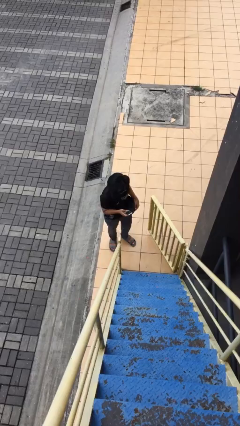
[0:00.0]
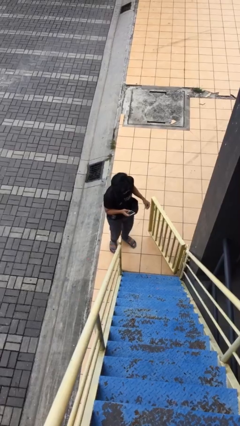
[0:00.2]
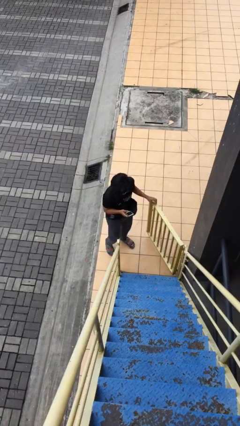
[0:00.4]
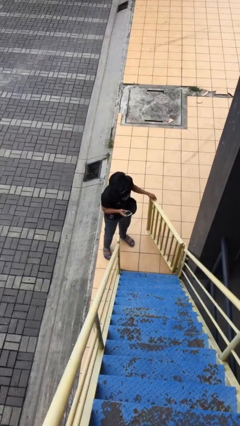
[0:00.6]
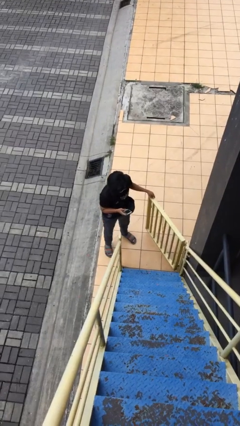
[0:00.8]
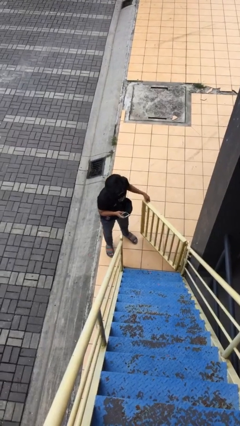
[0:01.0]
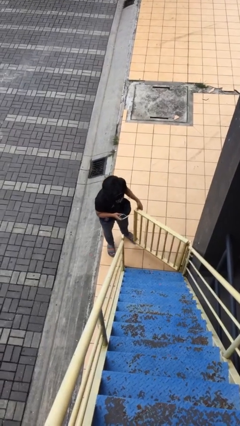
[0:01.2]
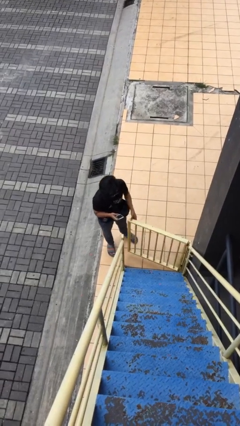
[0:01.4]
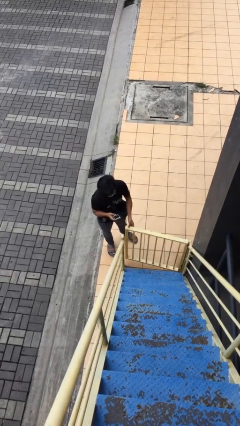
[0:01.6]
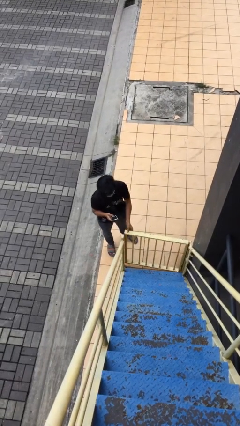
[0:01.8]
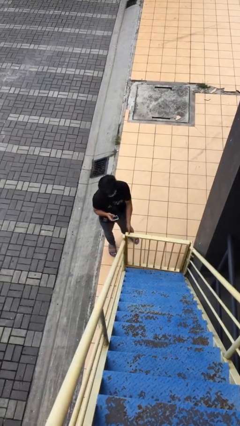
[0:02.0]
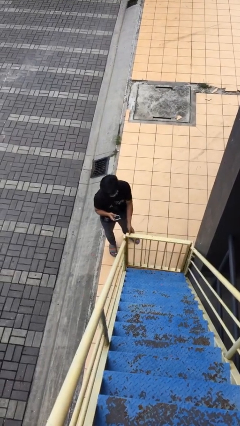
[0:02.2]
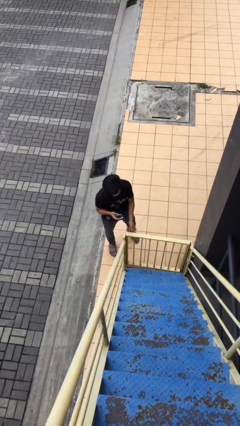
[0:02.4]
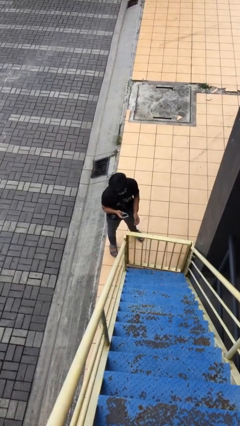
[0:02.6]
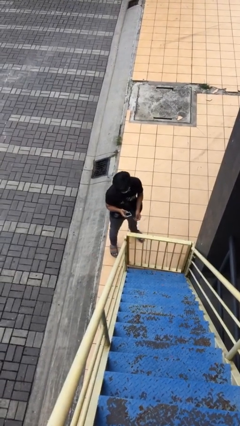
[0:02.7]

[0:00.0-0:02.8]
person closes facility door

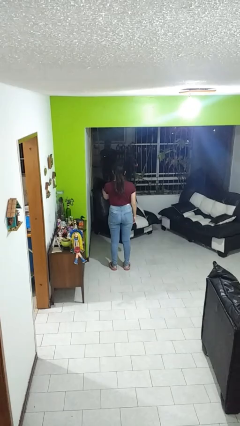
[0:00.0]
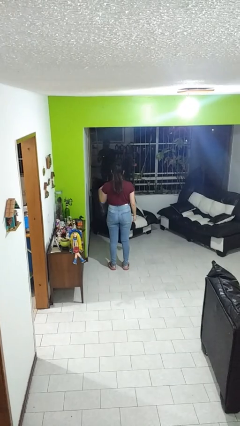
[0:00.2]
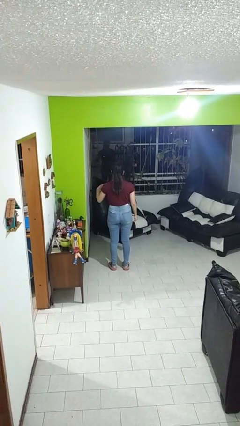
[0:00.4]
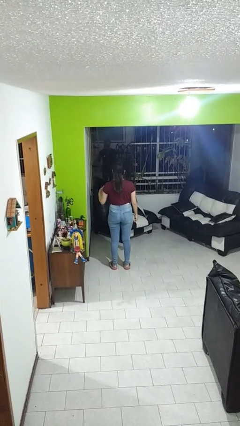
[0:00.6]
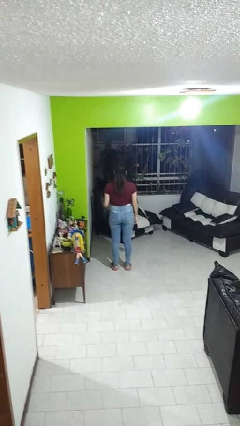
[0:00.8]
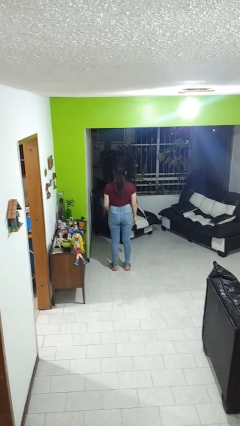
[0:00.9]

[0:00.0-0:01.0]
person gestures come here

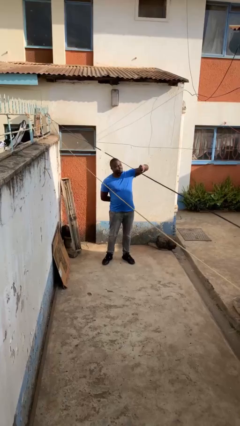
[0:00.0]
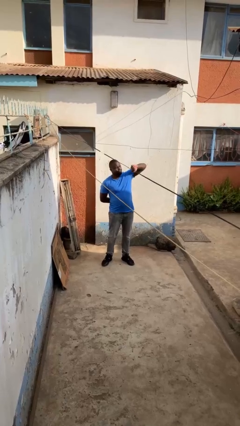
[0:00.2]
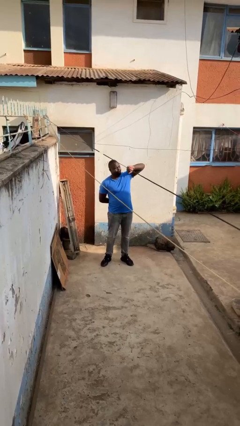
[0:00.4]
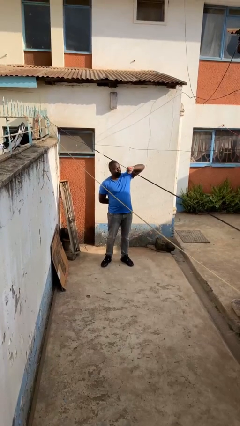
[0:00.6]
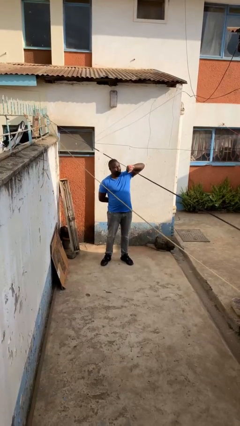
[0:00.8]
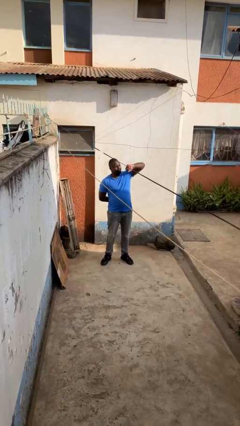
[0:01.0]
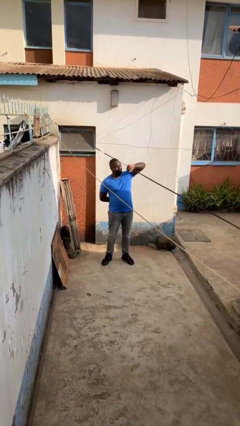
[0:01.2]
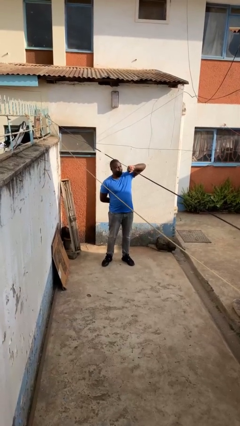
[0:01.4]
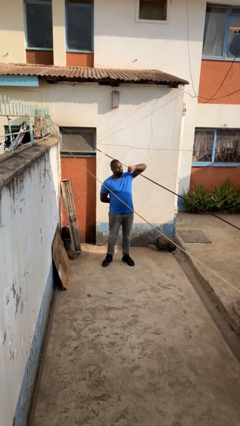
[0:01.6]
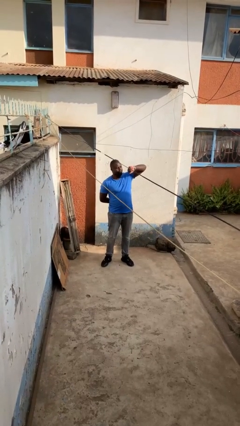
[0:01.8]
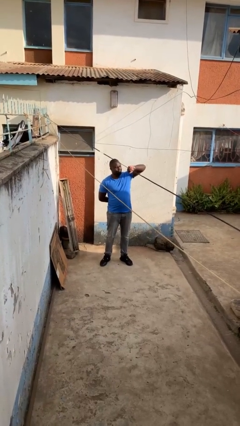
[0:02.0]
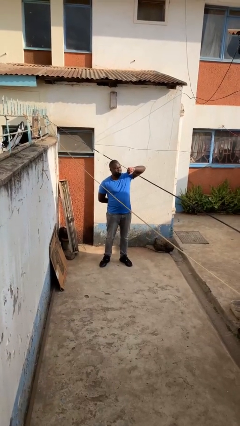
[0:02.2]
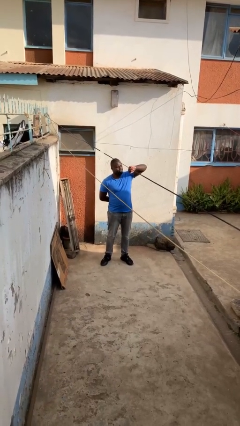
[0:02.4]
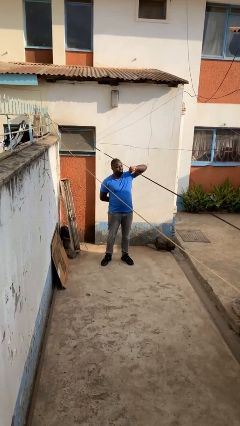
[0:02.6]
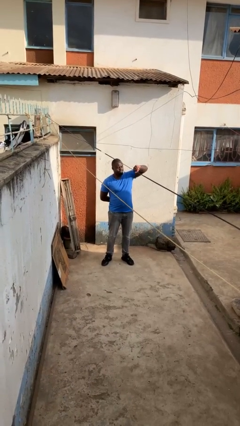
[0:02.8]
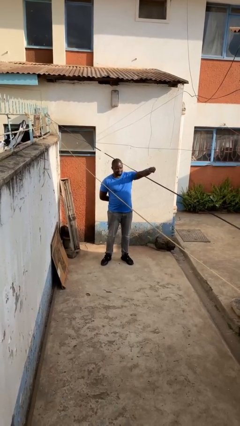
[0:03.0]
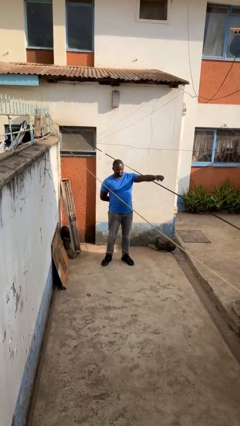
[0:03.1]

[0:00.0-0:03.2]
person looks at wristwatch

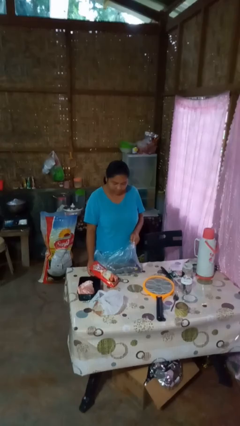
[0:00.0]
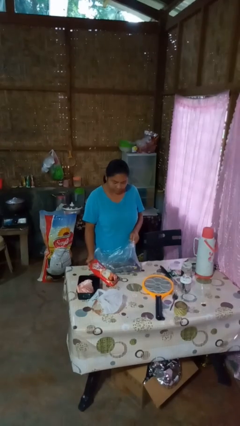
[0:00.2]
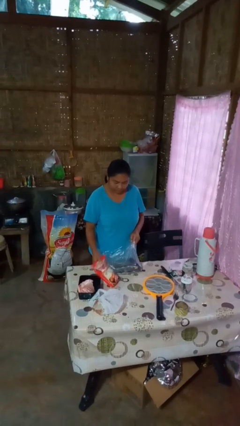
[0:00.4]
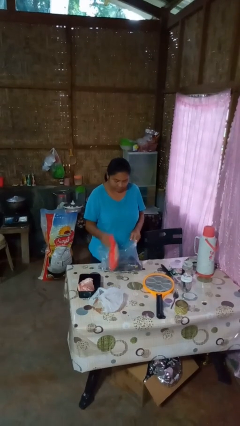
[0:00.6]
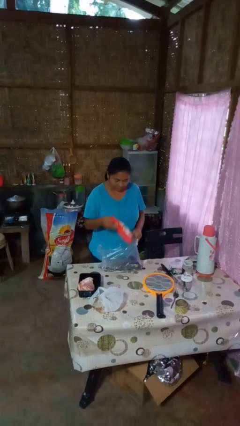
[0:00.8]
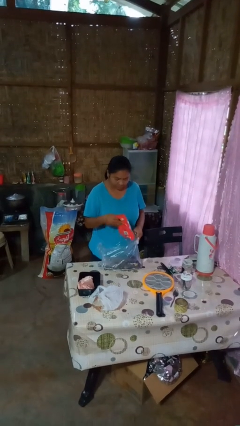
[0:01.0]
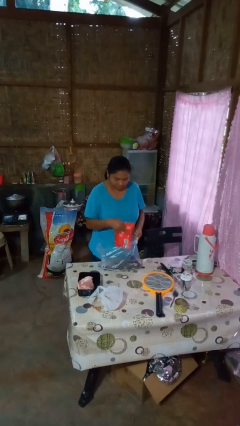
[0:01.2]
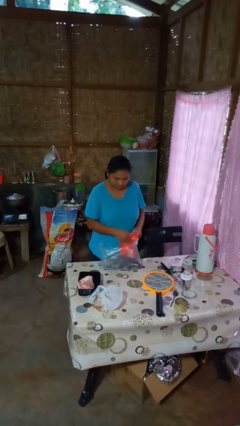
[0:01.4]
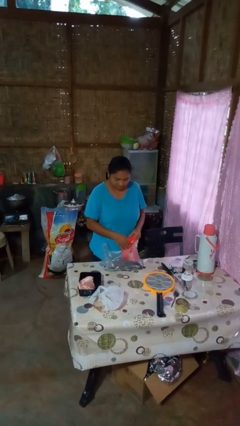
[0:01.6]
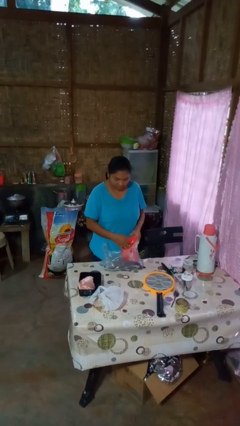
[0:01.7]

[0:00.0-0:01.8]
person puts object into bag

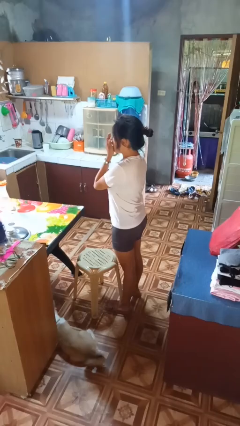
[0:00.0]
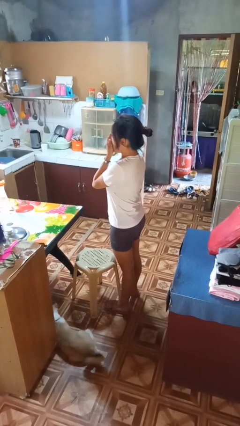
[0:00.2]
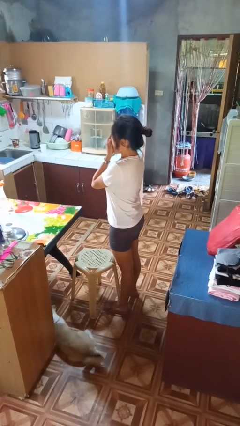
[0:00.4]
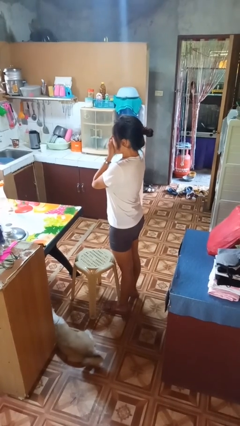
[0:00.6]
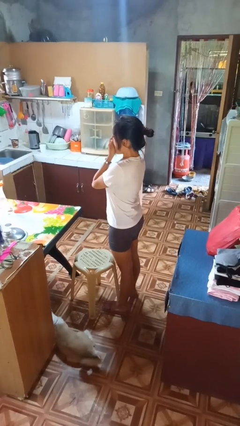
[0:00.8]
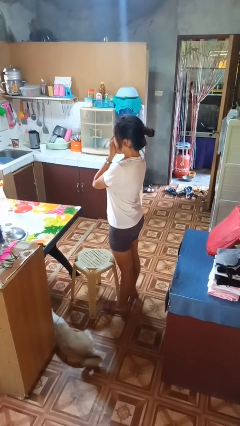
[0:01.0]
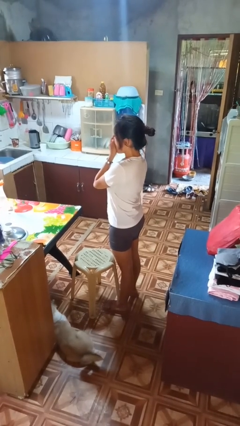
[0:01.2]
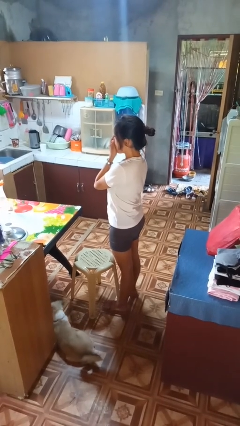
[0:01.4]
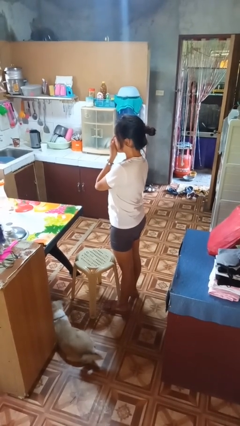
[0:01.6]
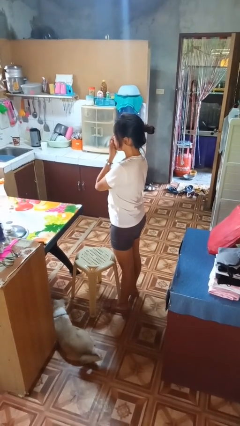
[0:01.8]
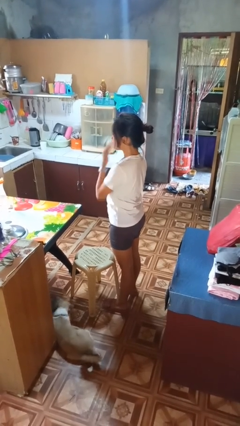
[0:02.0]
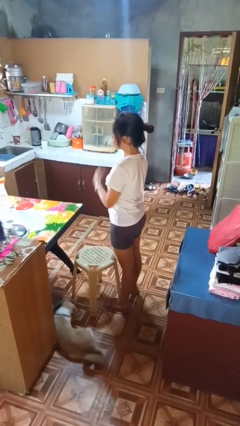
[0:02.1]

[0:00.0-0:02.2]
person yawns

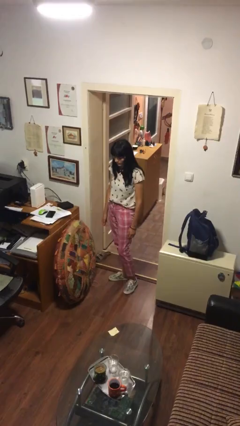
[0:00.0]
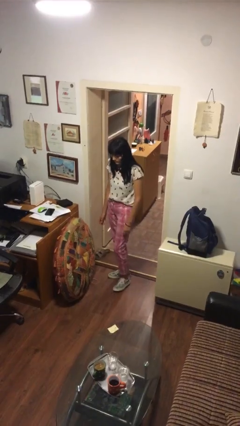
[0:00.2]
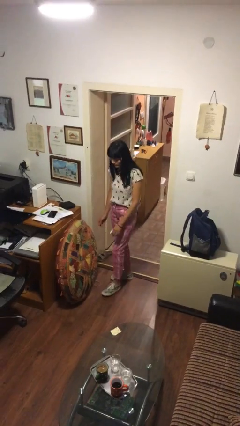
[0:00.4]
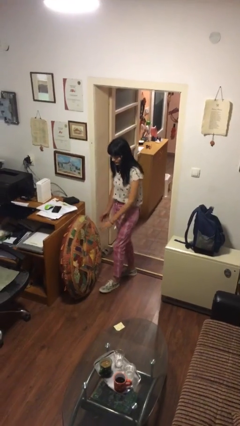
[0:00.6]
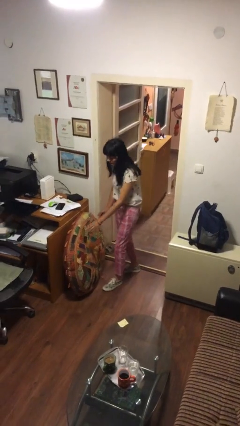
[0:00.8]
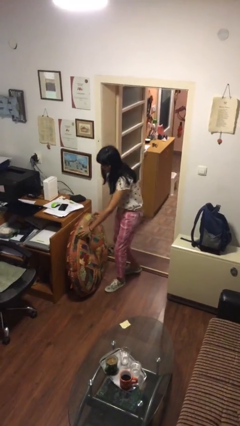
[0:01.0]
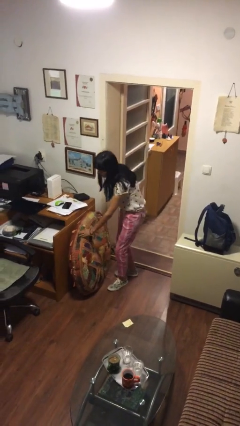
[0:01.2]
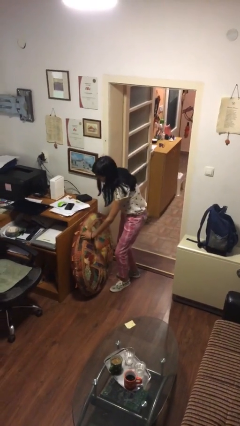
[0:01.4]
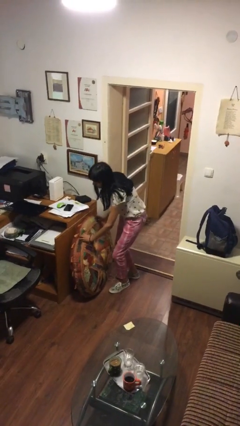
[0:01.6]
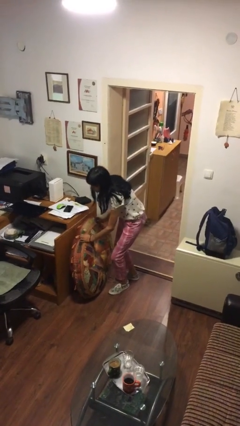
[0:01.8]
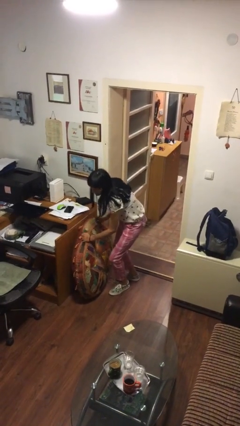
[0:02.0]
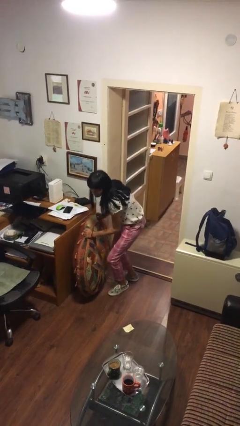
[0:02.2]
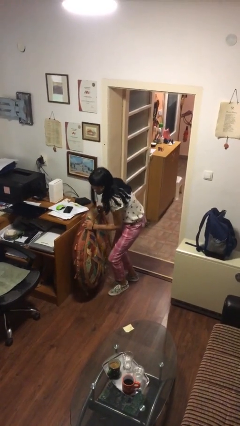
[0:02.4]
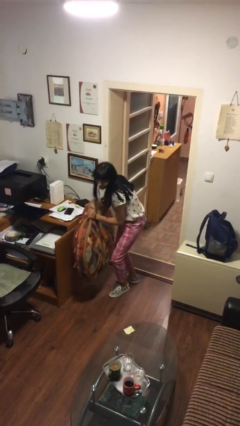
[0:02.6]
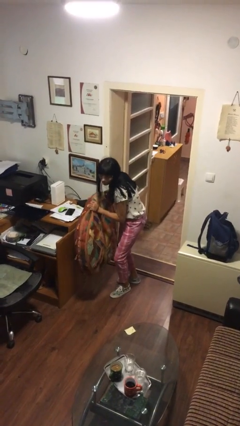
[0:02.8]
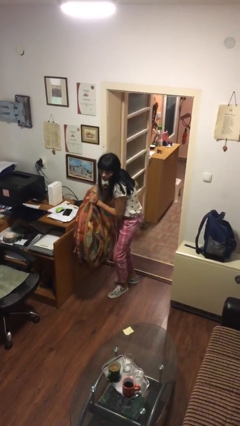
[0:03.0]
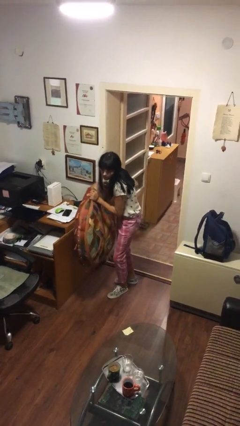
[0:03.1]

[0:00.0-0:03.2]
person picks up object from floor

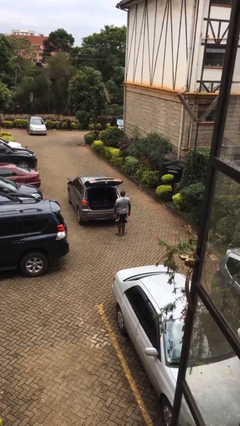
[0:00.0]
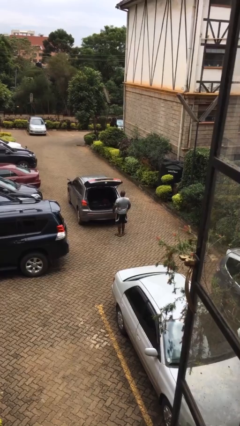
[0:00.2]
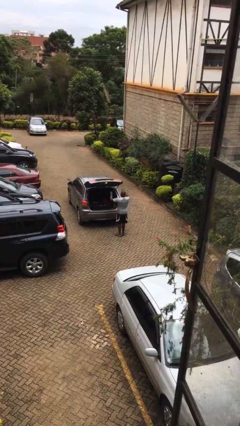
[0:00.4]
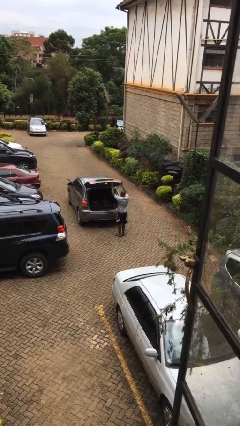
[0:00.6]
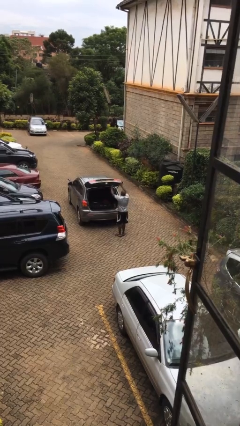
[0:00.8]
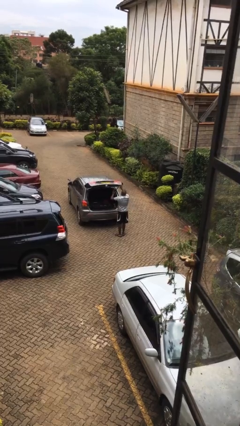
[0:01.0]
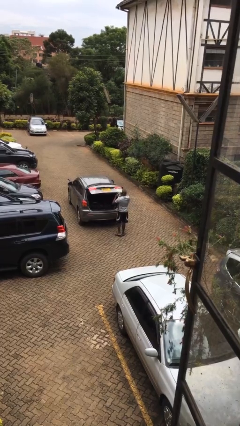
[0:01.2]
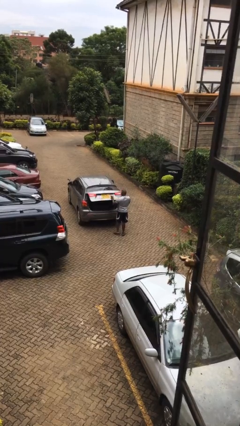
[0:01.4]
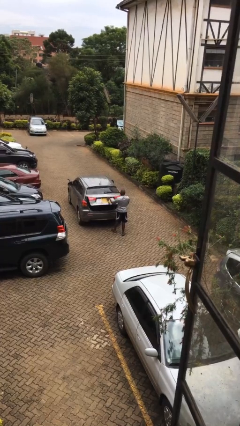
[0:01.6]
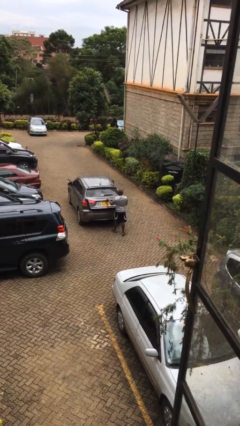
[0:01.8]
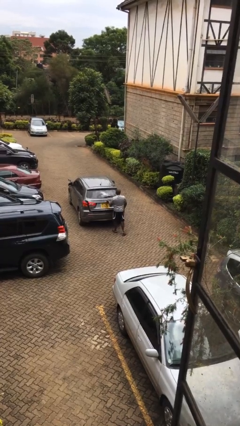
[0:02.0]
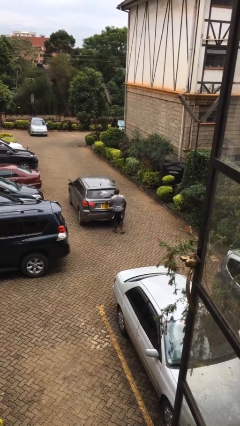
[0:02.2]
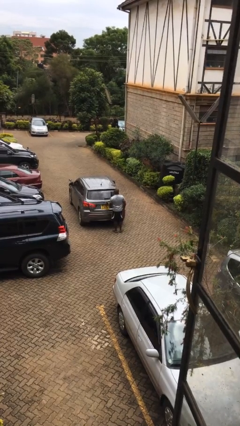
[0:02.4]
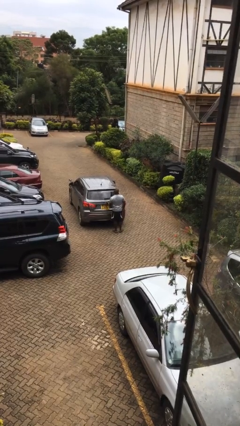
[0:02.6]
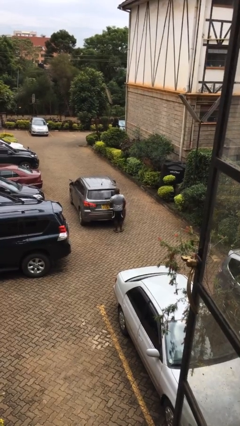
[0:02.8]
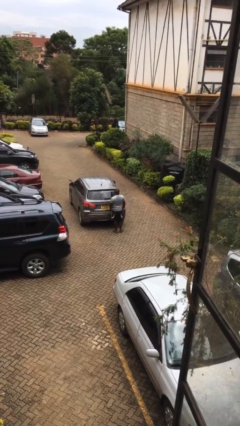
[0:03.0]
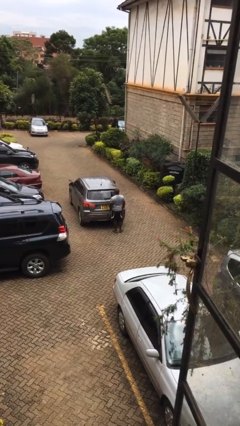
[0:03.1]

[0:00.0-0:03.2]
person closes car trunk
